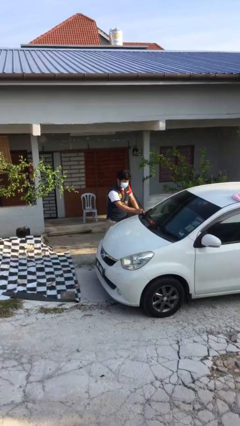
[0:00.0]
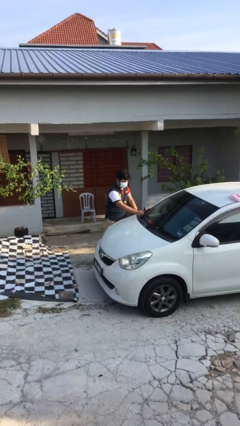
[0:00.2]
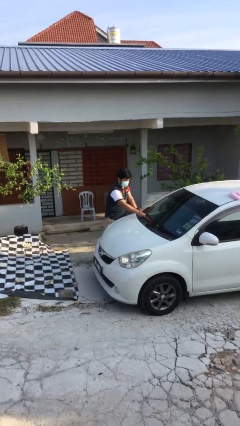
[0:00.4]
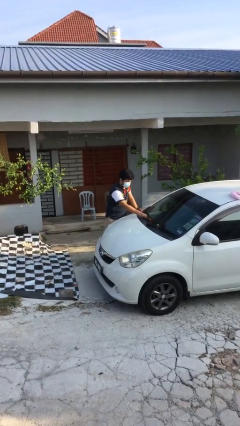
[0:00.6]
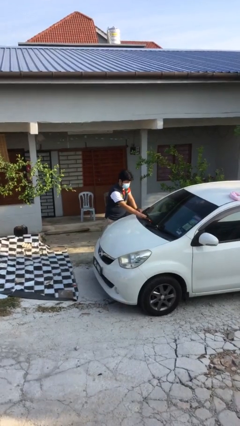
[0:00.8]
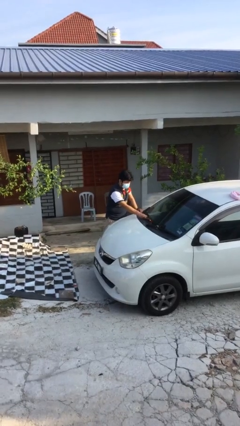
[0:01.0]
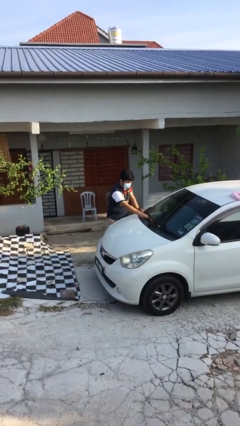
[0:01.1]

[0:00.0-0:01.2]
person flips down car wipers

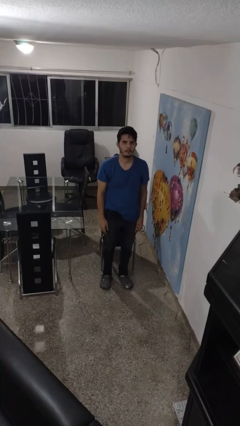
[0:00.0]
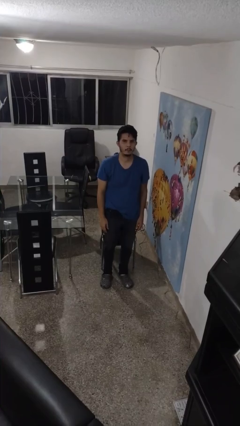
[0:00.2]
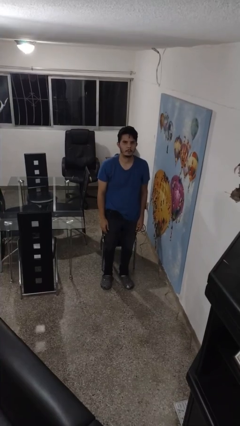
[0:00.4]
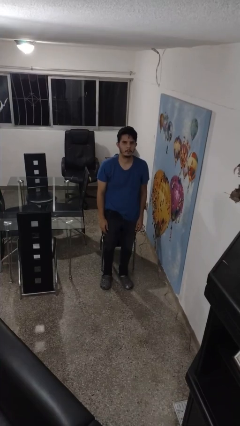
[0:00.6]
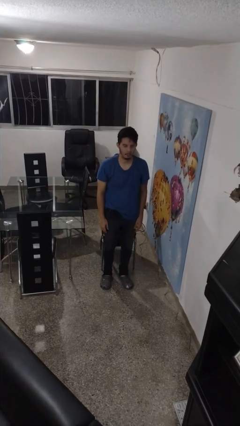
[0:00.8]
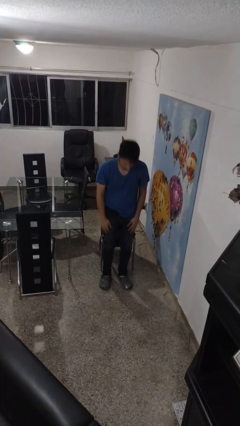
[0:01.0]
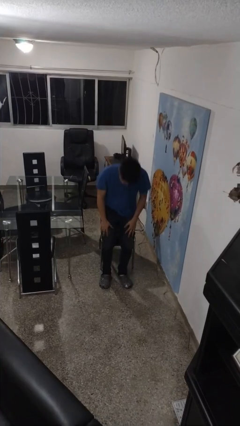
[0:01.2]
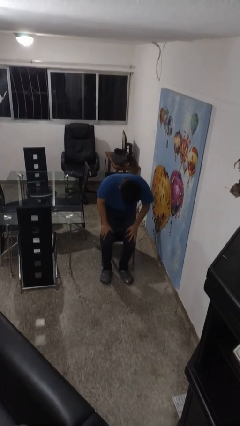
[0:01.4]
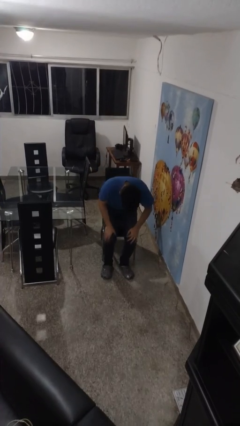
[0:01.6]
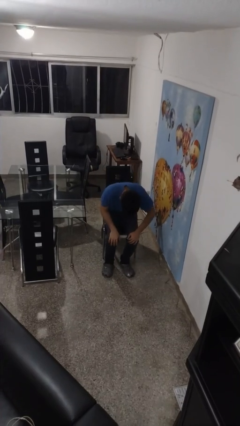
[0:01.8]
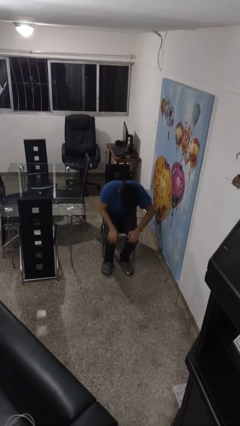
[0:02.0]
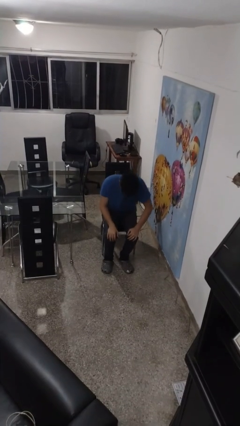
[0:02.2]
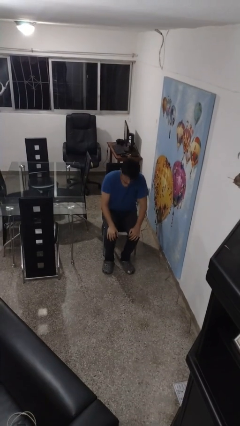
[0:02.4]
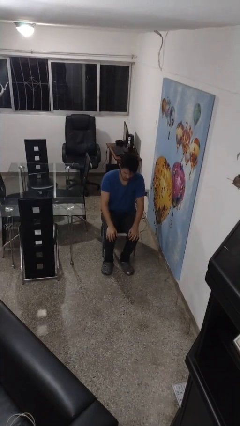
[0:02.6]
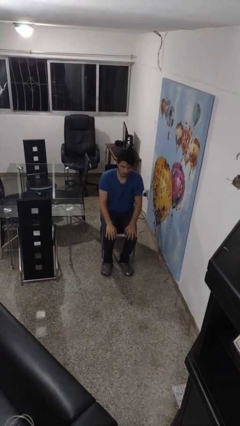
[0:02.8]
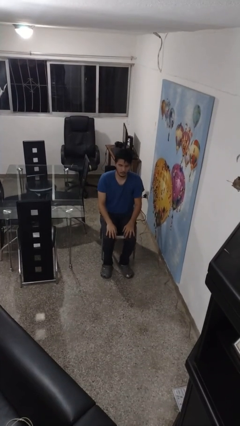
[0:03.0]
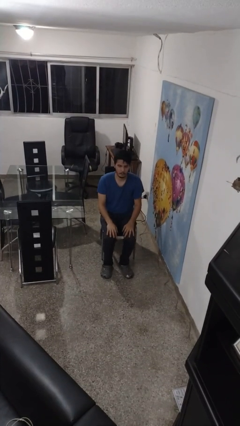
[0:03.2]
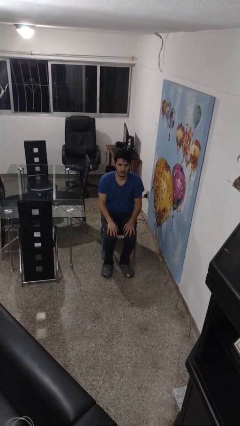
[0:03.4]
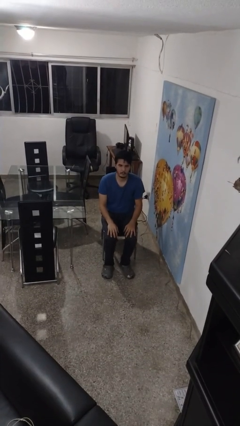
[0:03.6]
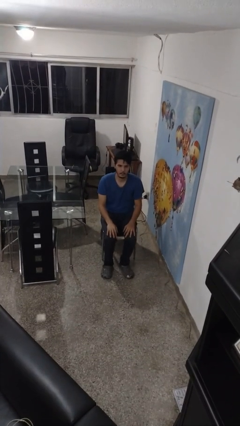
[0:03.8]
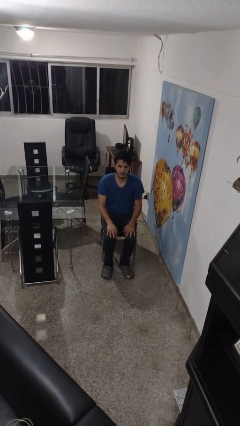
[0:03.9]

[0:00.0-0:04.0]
person sits down

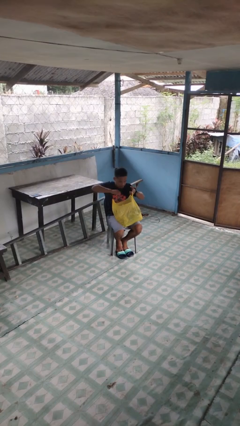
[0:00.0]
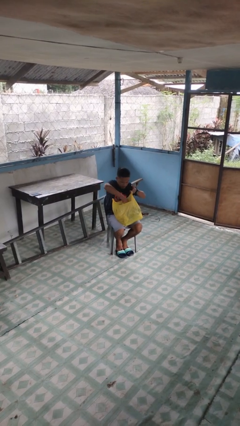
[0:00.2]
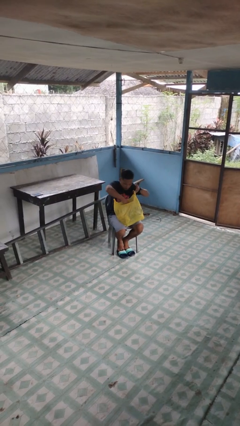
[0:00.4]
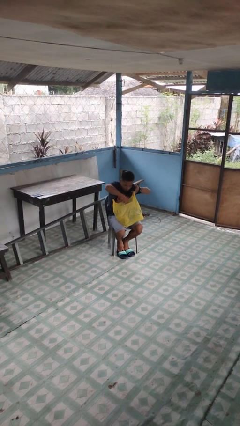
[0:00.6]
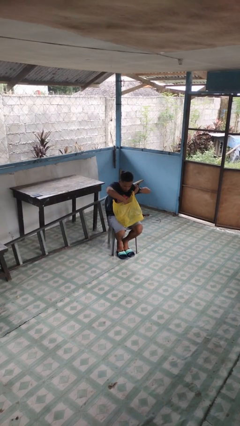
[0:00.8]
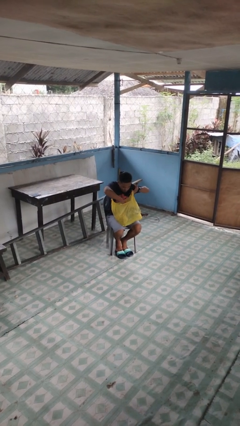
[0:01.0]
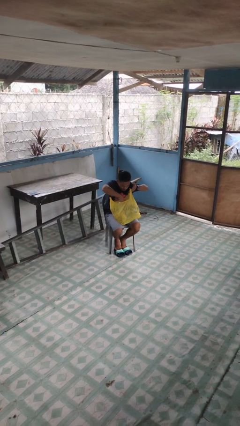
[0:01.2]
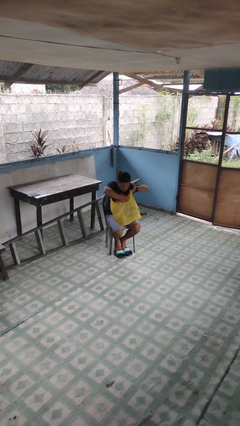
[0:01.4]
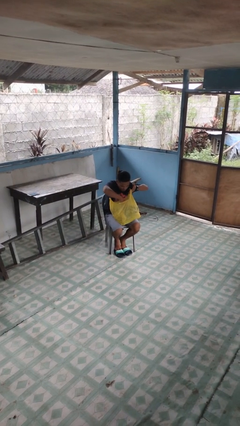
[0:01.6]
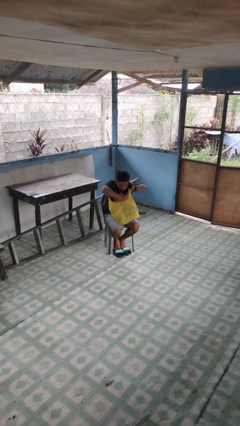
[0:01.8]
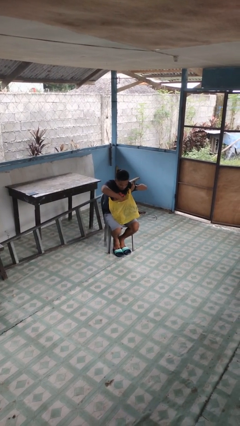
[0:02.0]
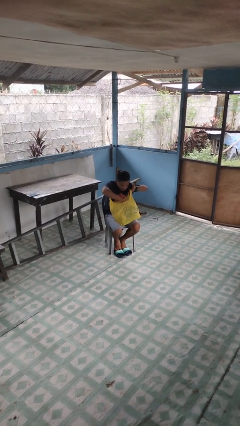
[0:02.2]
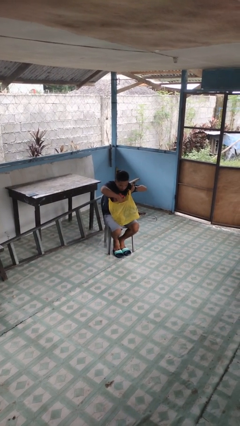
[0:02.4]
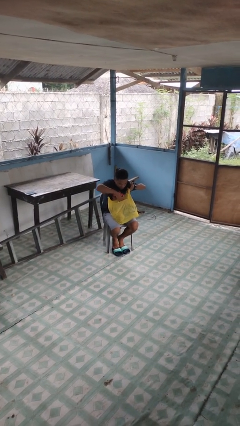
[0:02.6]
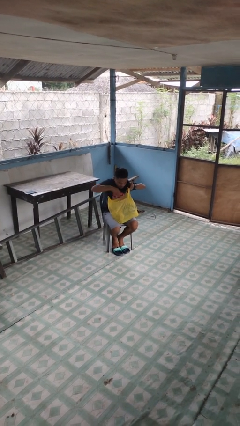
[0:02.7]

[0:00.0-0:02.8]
person searches in bag

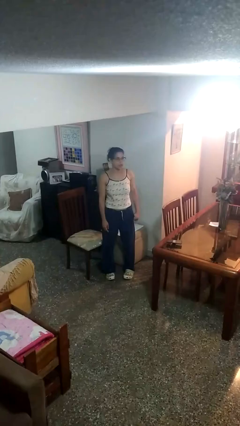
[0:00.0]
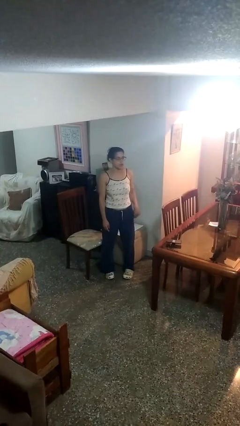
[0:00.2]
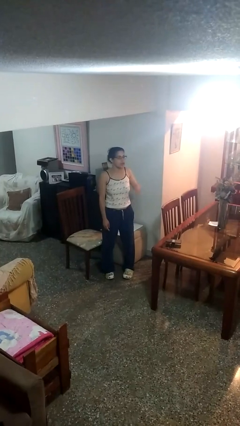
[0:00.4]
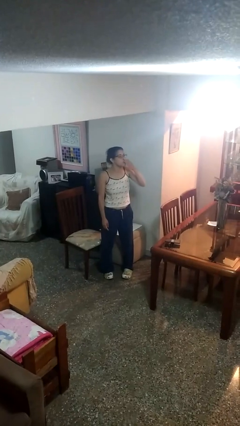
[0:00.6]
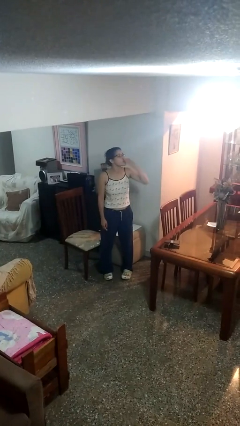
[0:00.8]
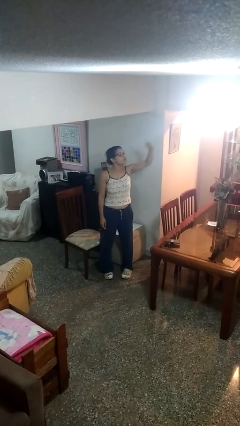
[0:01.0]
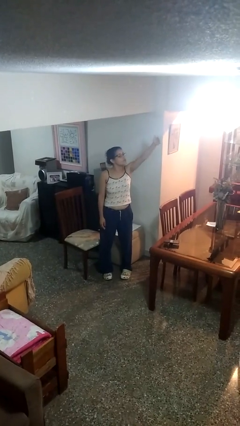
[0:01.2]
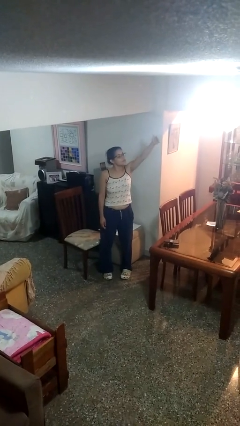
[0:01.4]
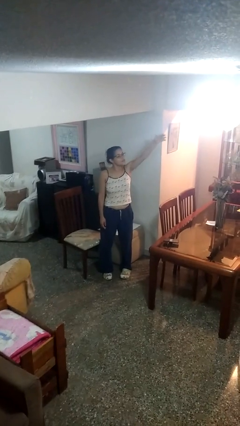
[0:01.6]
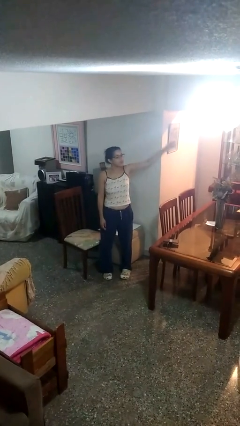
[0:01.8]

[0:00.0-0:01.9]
person gestures blow kiss

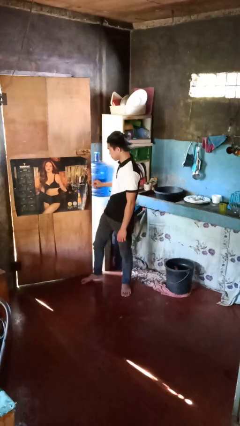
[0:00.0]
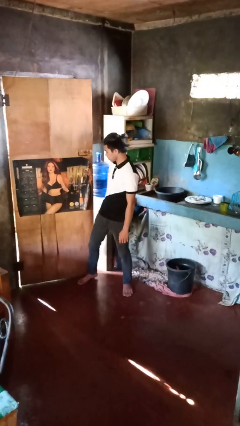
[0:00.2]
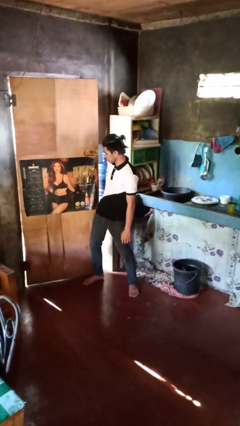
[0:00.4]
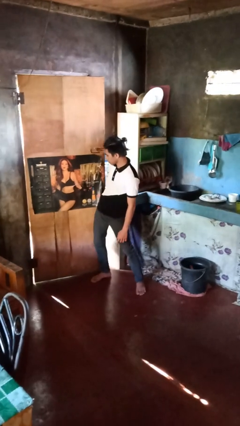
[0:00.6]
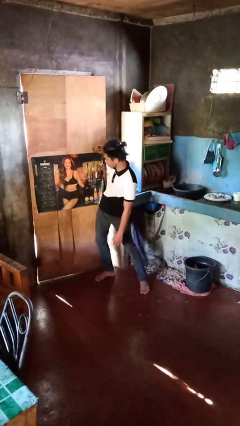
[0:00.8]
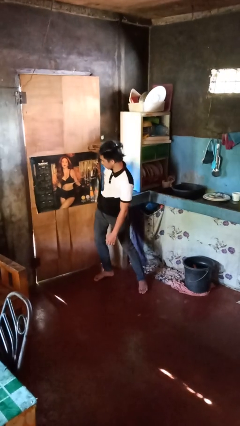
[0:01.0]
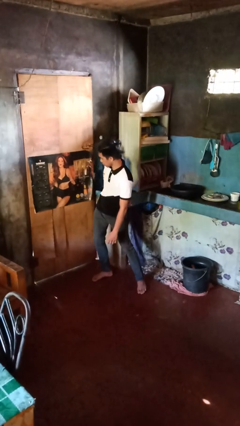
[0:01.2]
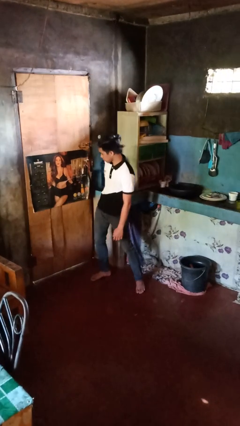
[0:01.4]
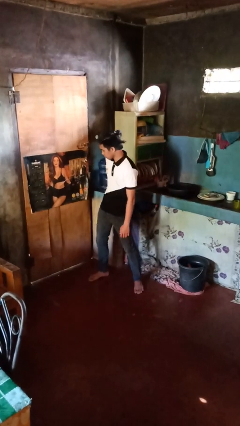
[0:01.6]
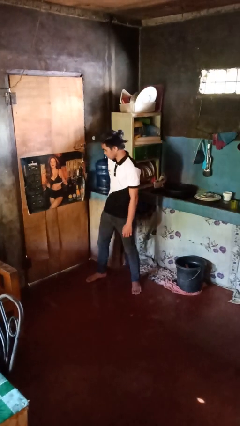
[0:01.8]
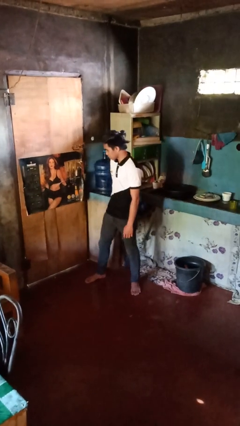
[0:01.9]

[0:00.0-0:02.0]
person closes door with hip

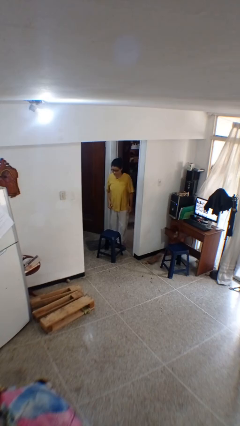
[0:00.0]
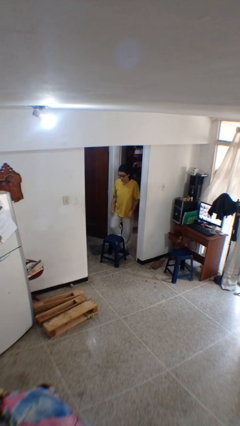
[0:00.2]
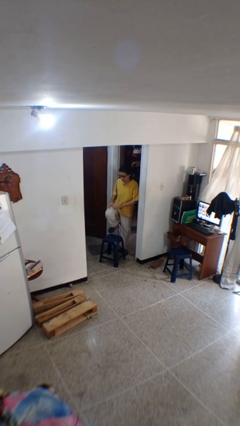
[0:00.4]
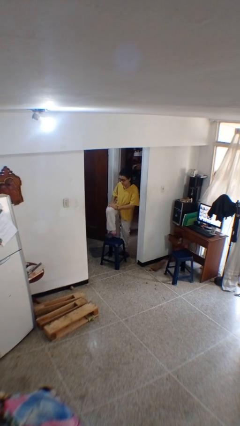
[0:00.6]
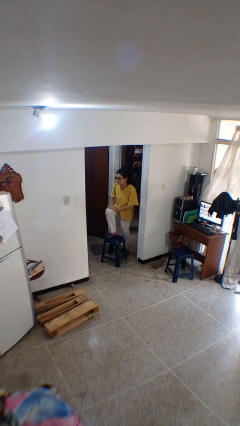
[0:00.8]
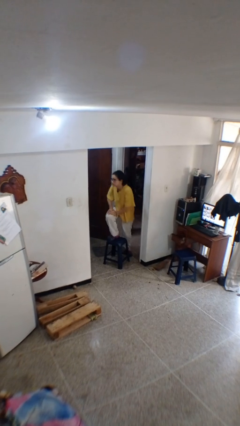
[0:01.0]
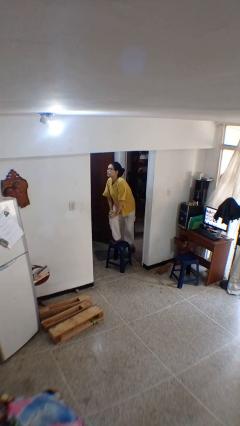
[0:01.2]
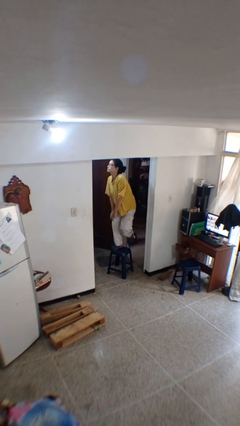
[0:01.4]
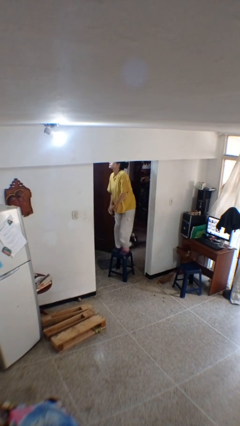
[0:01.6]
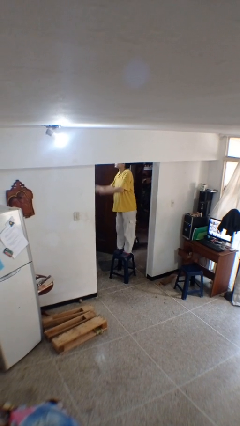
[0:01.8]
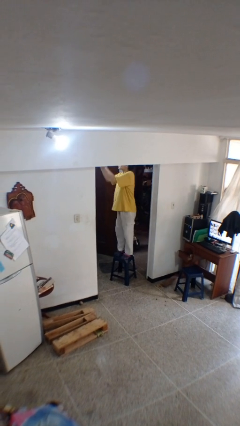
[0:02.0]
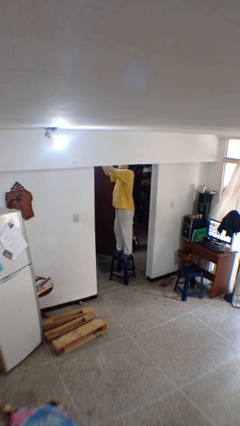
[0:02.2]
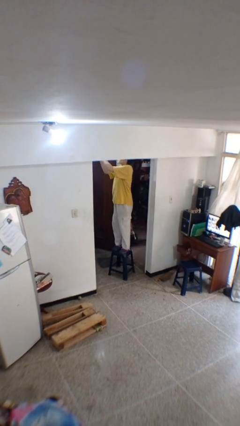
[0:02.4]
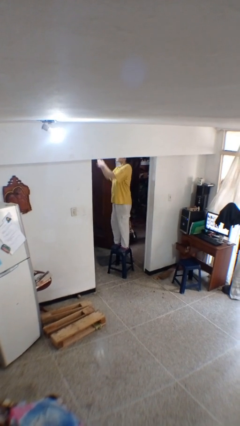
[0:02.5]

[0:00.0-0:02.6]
person climbs on chair

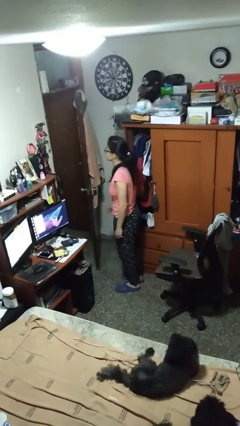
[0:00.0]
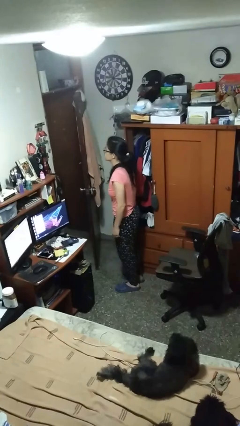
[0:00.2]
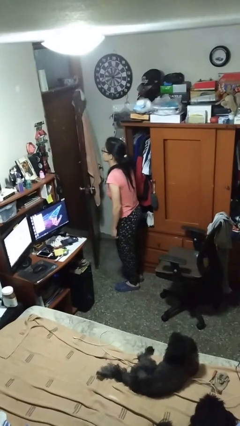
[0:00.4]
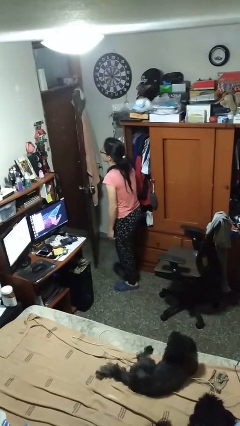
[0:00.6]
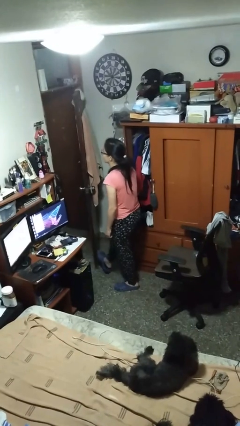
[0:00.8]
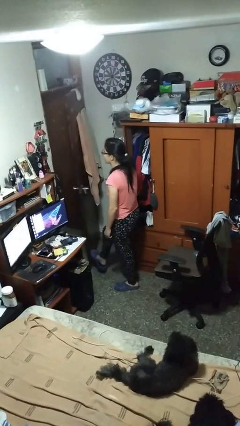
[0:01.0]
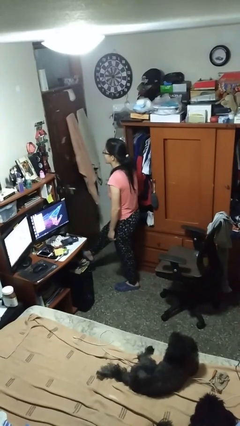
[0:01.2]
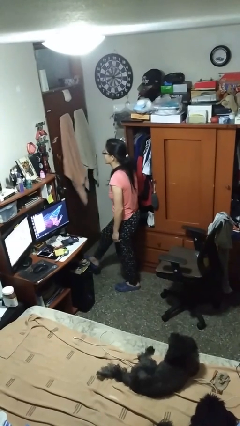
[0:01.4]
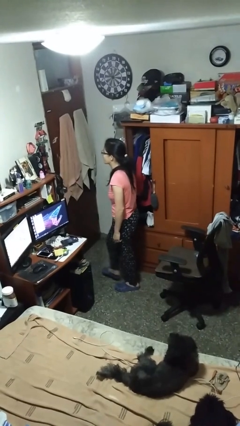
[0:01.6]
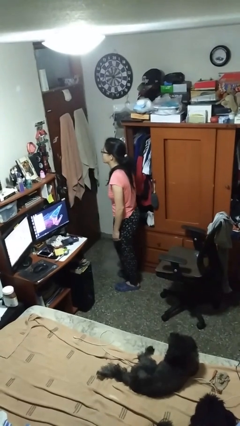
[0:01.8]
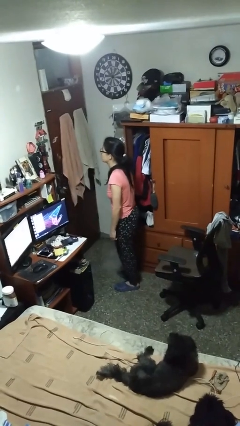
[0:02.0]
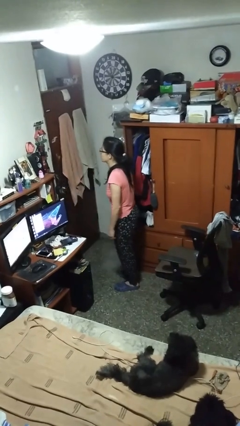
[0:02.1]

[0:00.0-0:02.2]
person closes door with foot

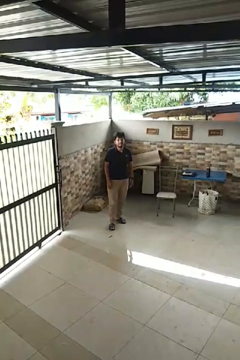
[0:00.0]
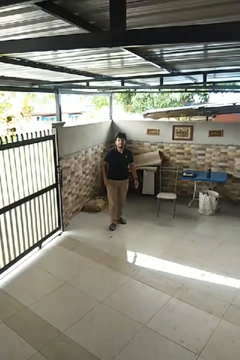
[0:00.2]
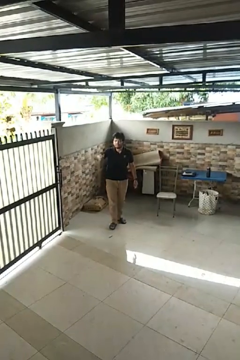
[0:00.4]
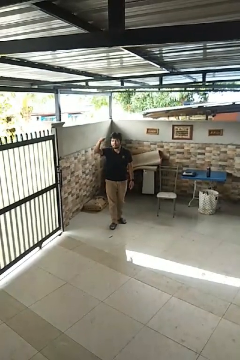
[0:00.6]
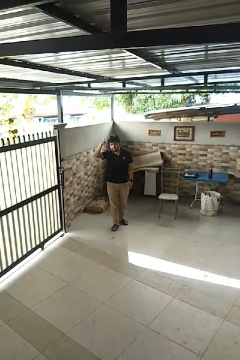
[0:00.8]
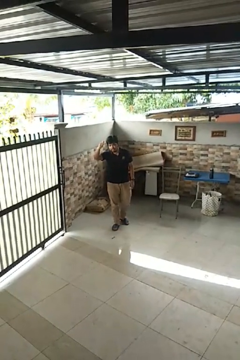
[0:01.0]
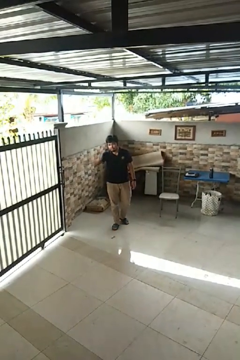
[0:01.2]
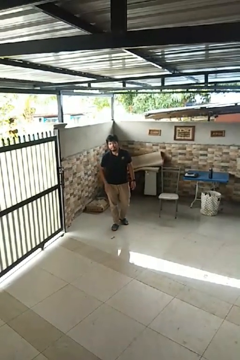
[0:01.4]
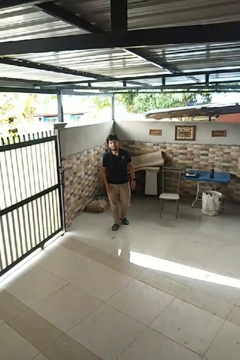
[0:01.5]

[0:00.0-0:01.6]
person gestures come here
